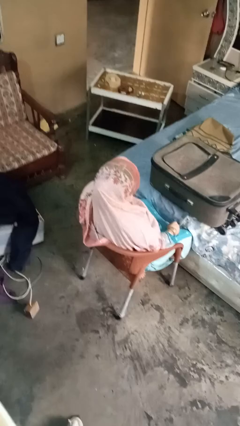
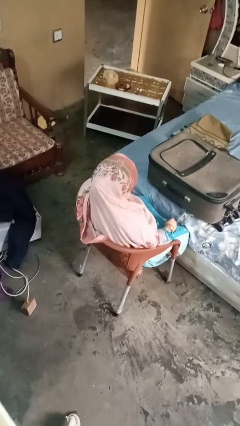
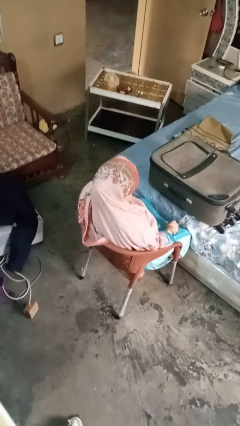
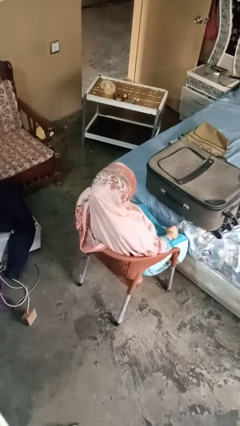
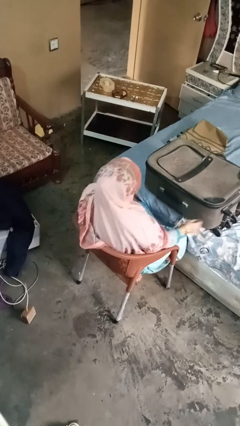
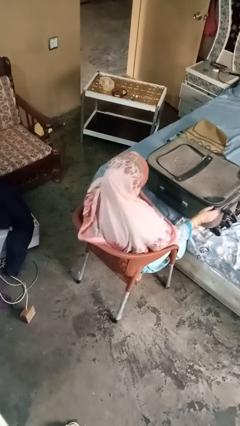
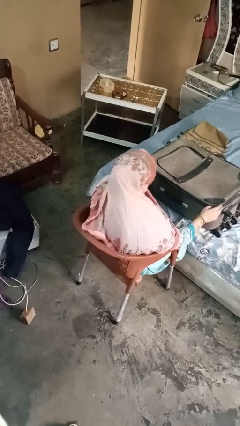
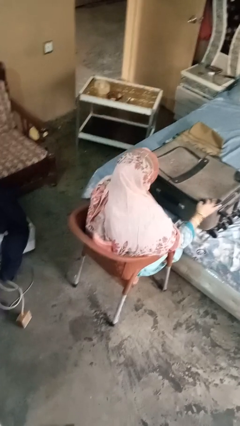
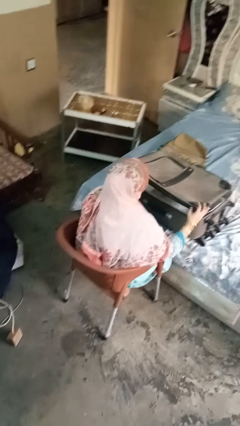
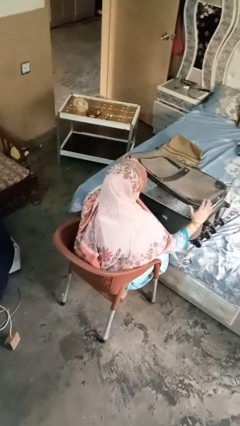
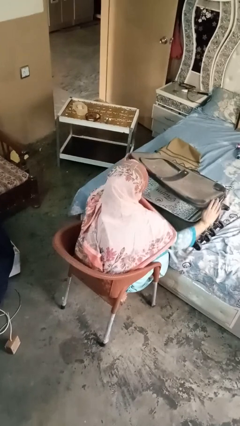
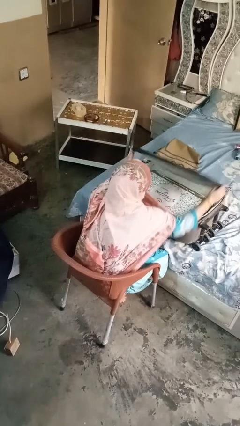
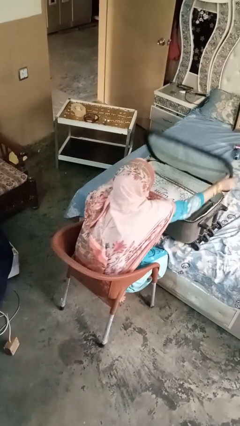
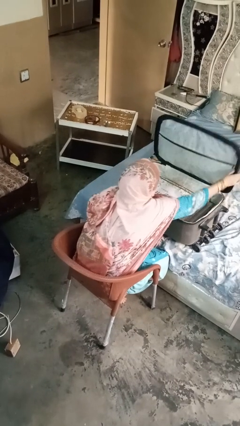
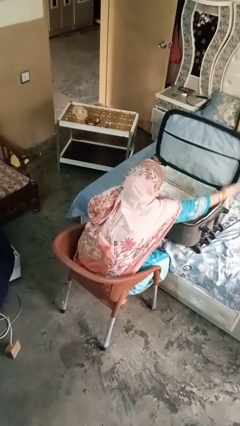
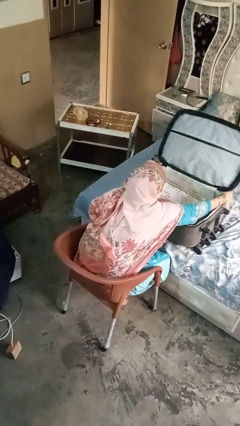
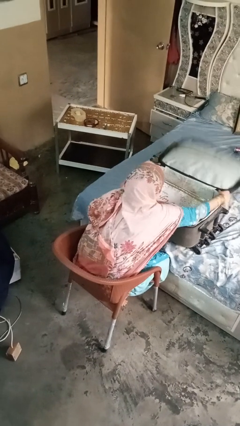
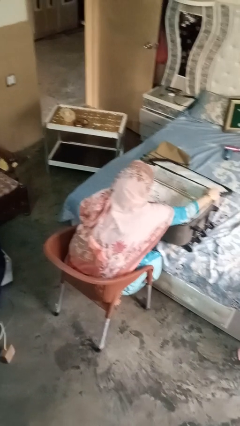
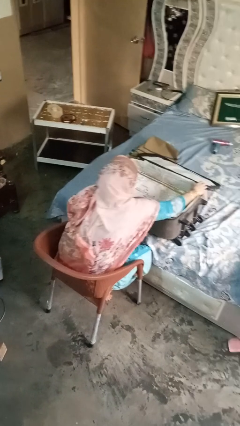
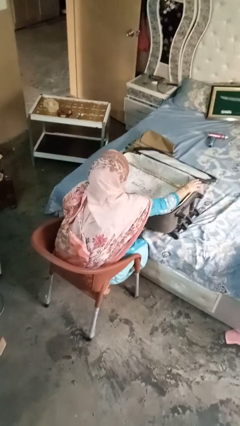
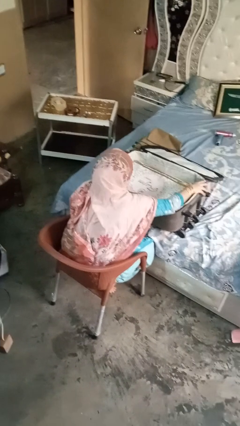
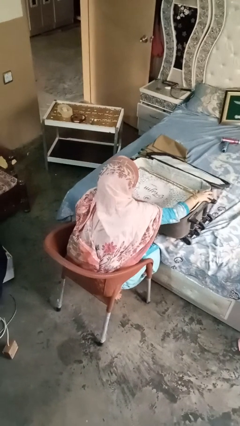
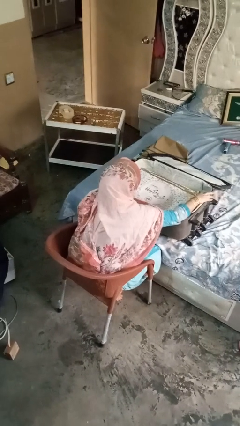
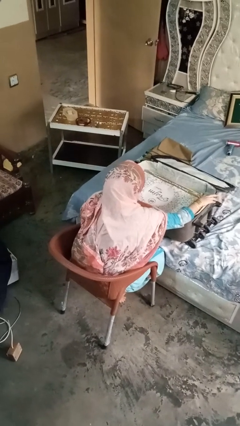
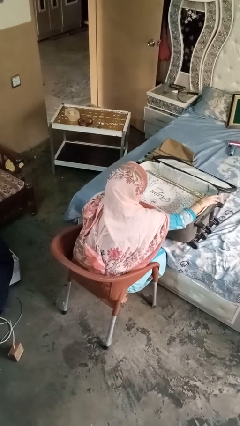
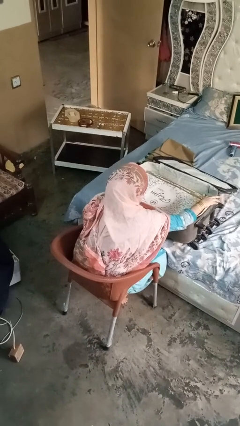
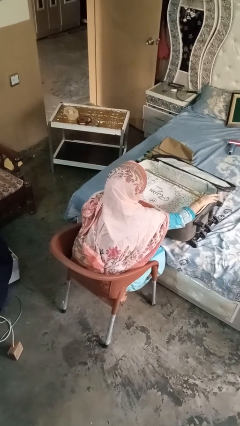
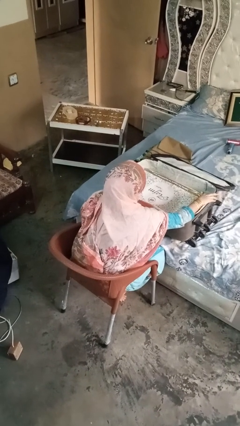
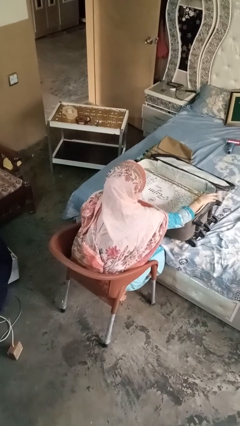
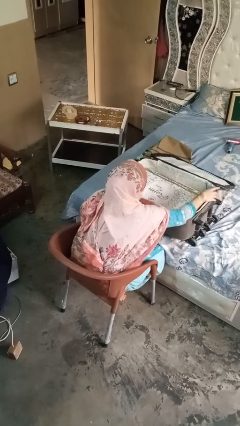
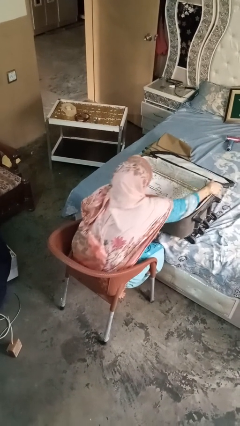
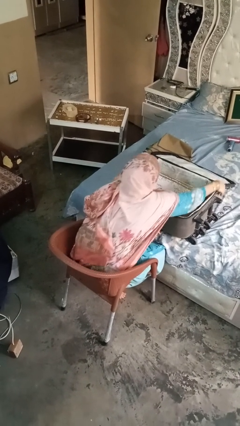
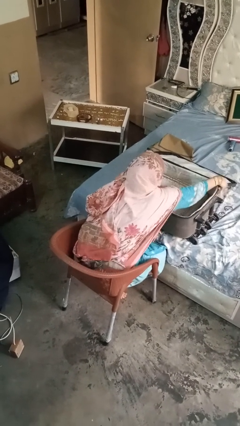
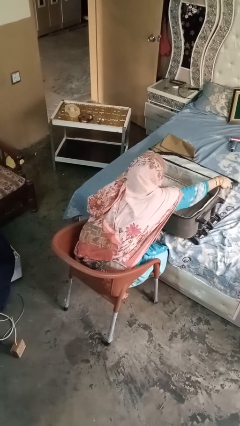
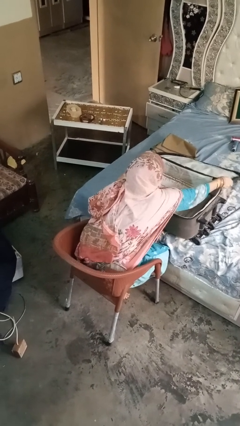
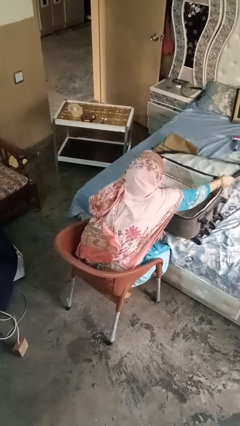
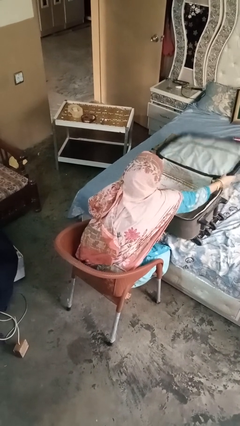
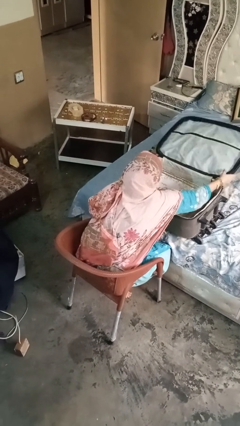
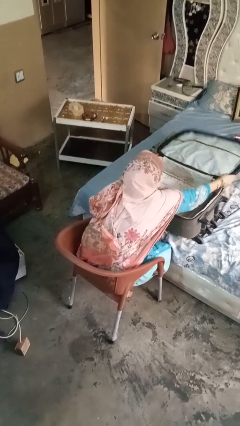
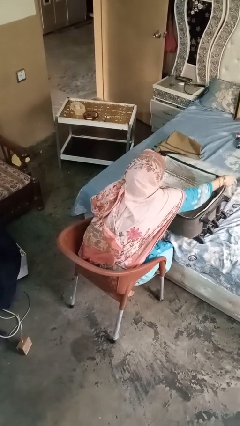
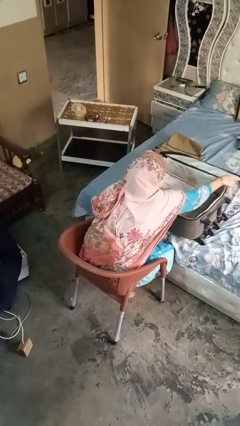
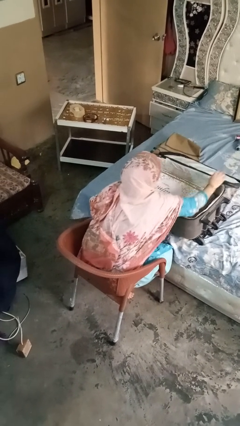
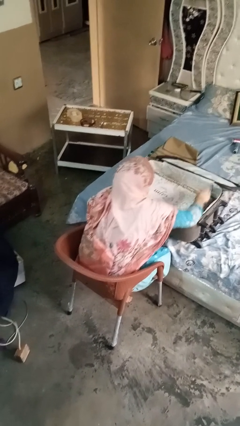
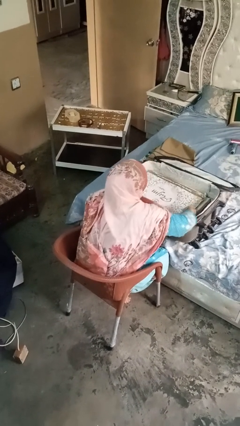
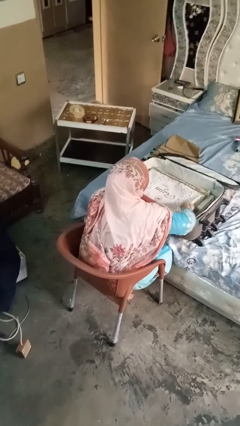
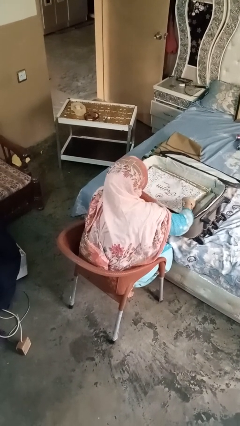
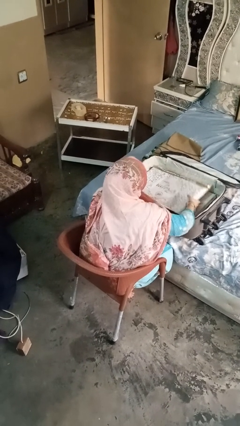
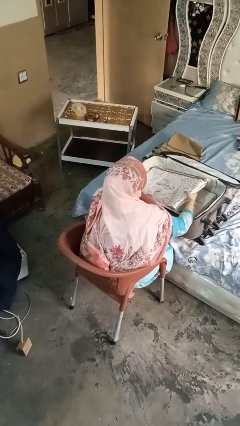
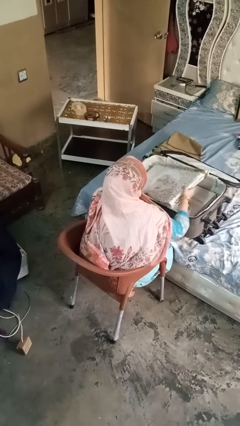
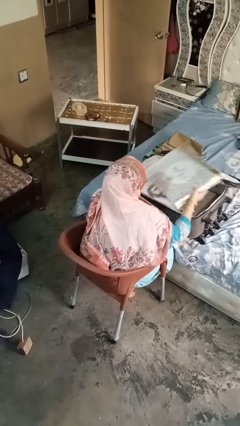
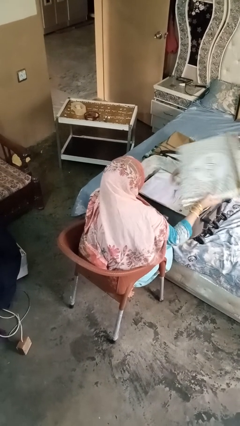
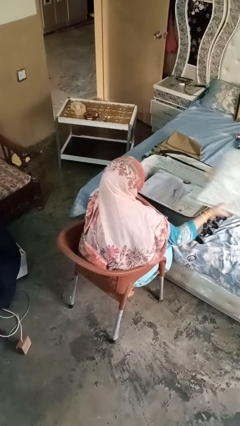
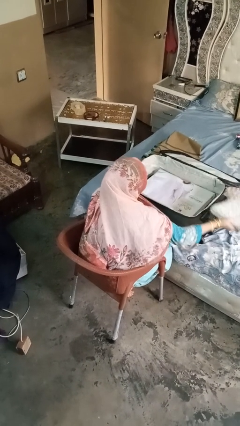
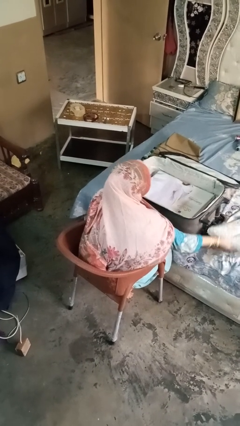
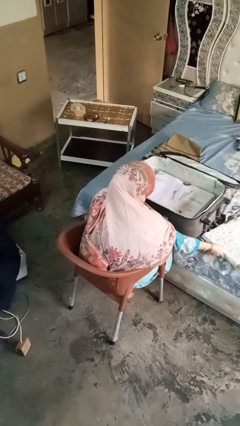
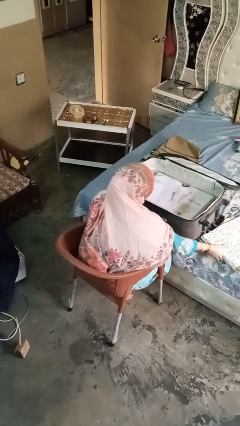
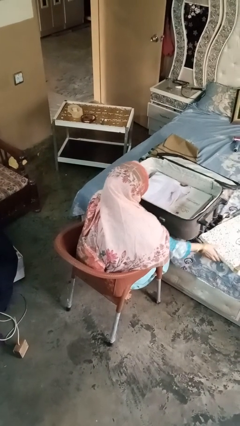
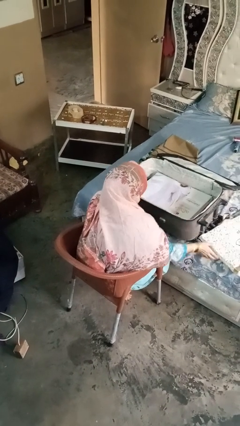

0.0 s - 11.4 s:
person unloads clothes from suitcase

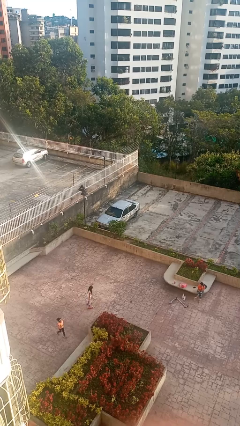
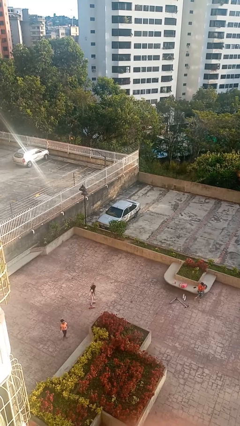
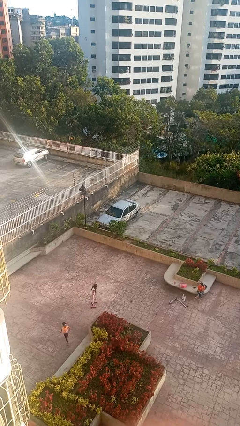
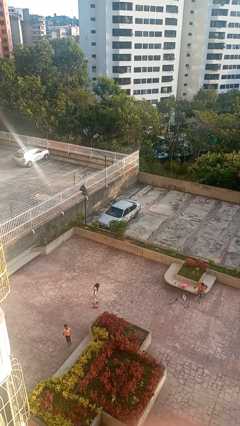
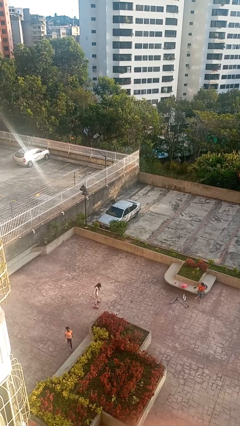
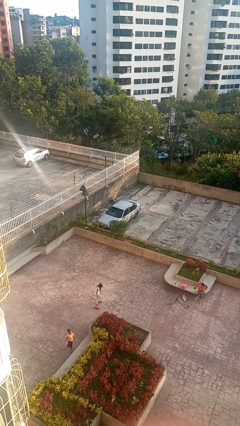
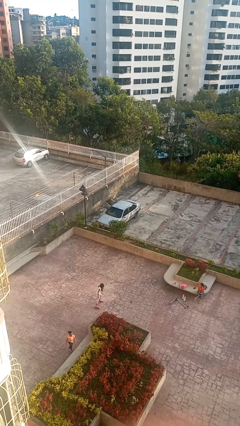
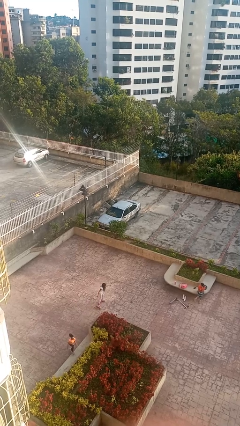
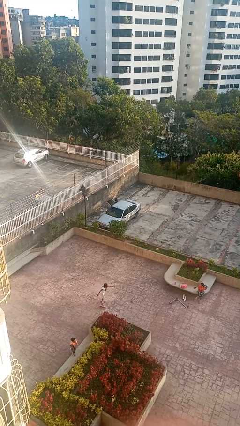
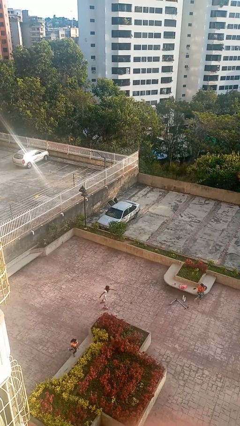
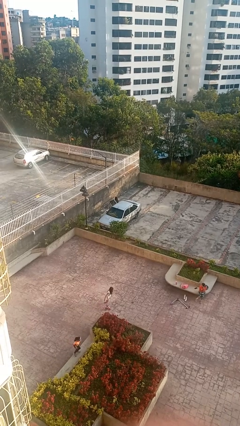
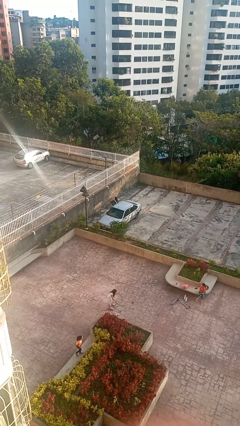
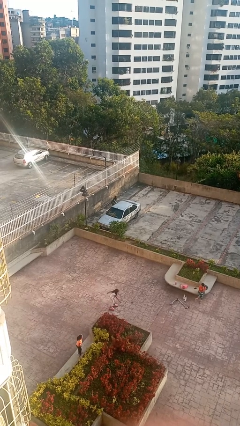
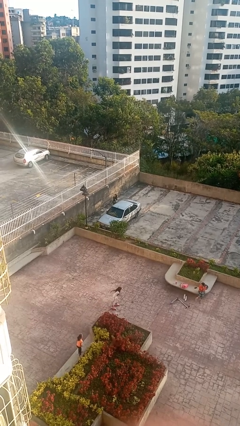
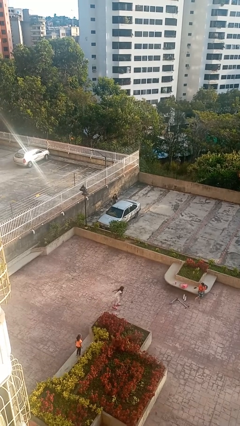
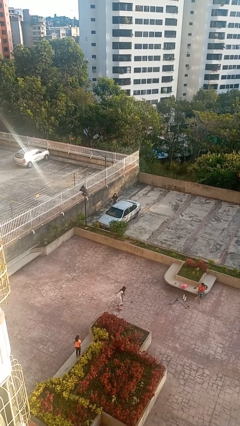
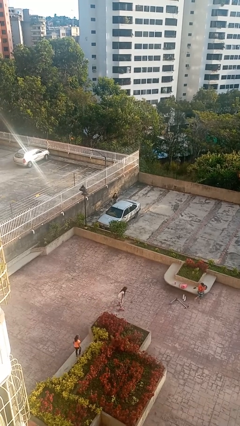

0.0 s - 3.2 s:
car drops off person

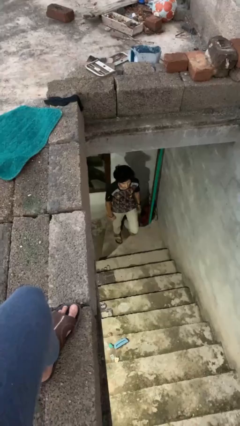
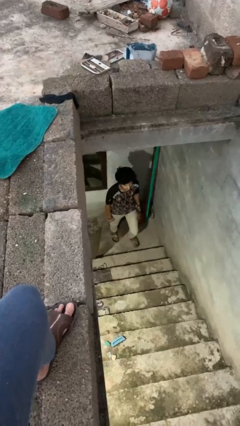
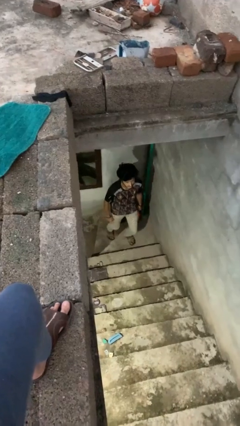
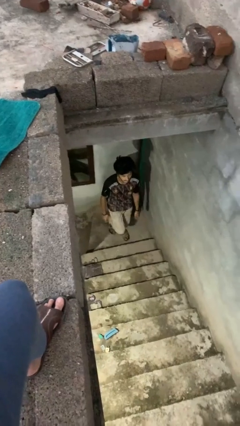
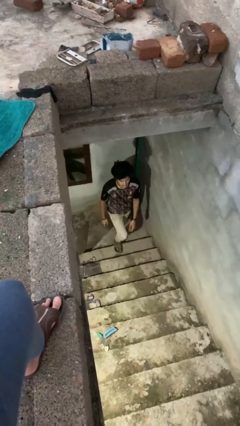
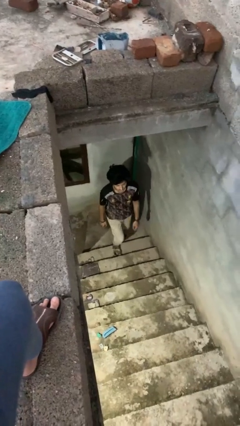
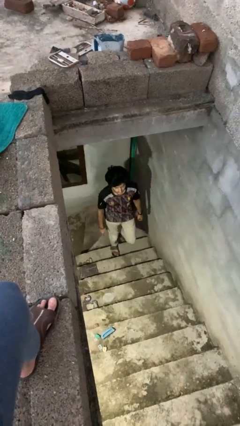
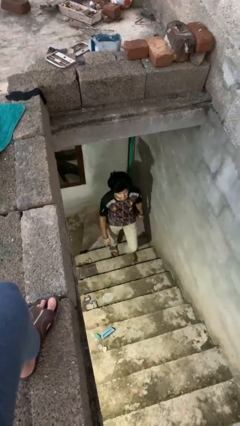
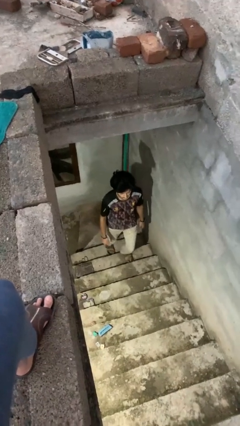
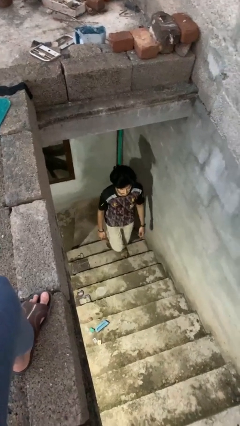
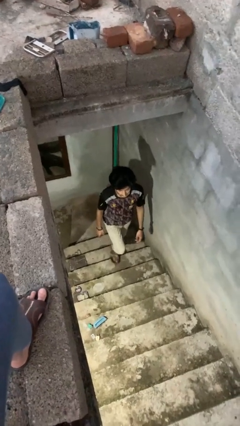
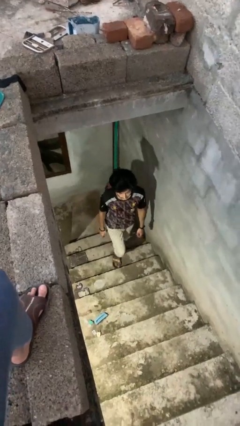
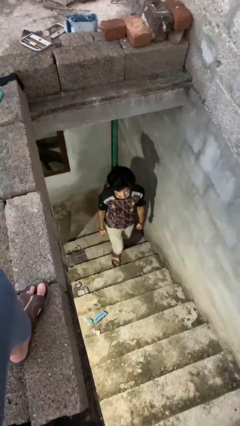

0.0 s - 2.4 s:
person climbs up stairs

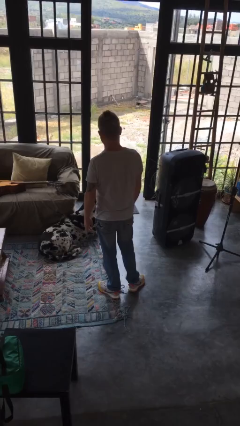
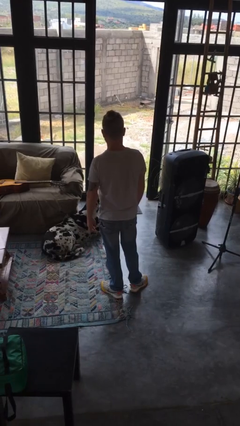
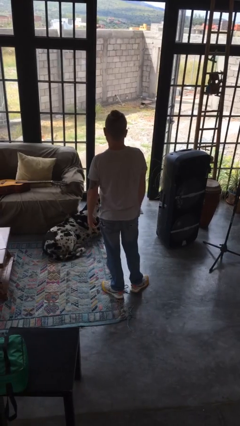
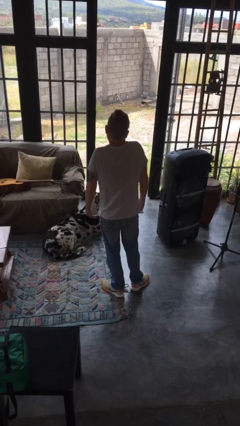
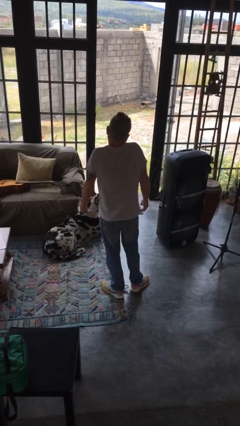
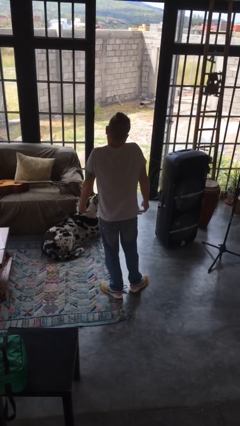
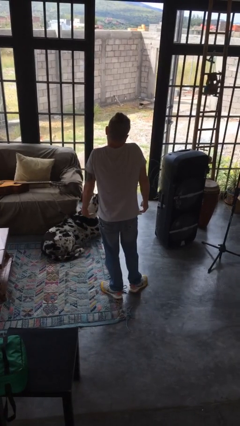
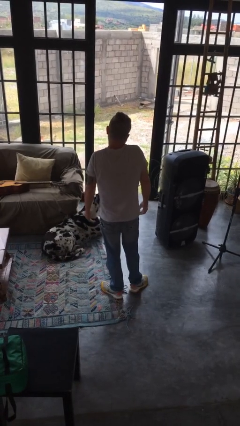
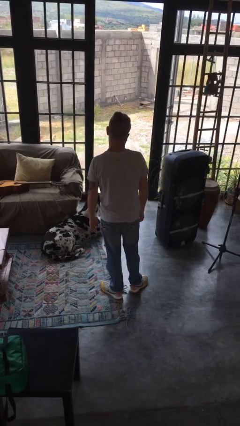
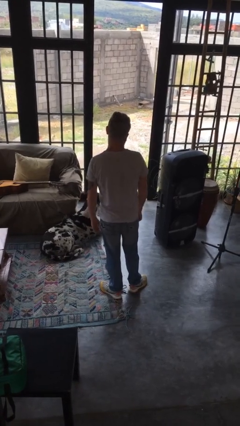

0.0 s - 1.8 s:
person shrugs
